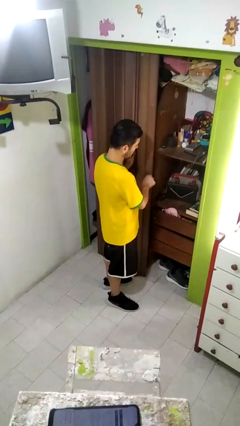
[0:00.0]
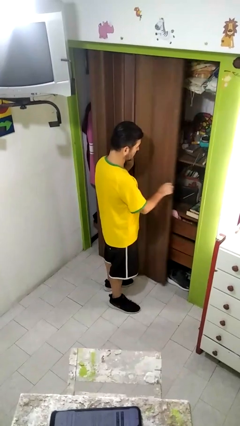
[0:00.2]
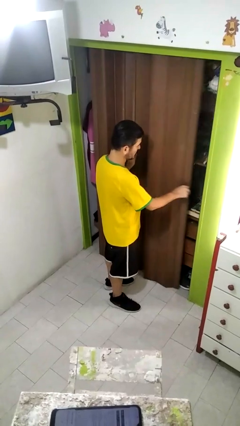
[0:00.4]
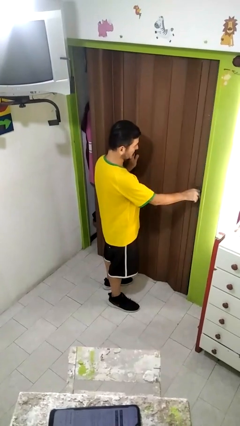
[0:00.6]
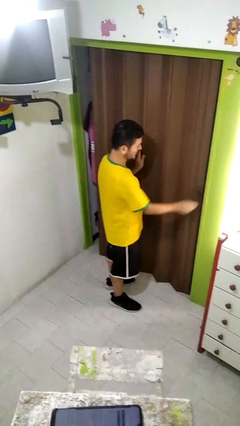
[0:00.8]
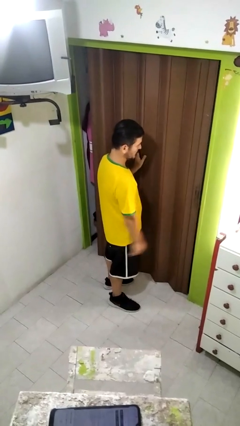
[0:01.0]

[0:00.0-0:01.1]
person closes closet door

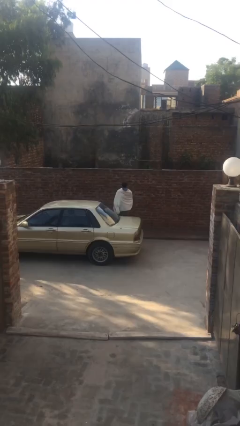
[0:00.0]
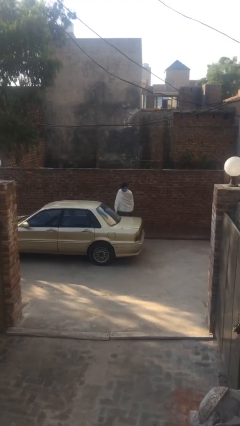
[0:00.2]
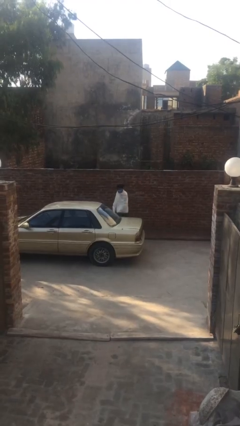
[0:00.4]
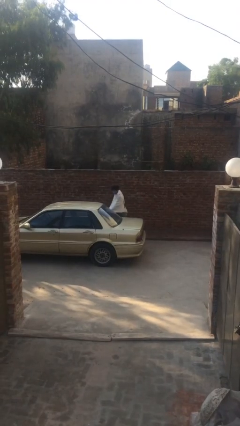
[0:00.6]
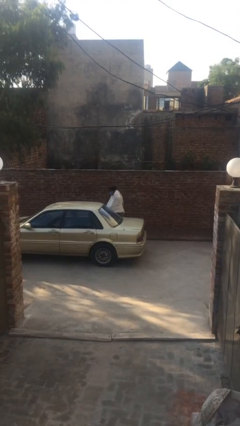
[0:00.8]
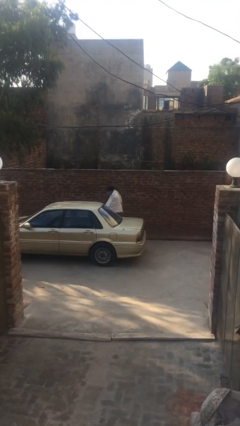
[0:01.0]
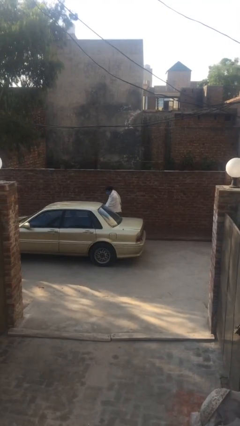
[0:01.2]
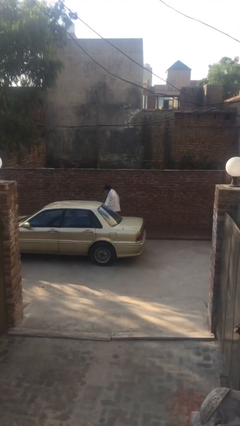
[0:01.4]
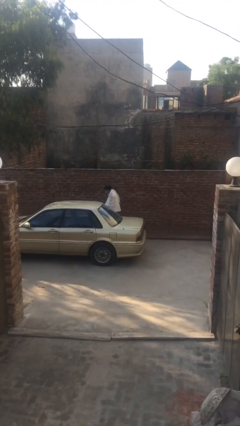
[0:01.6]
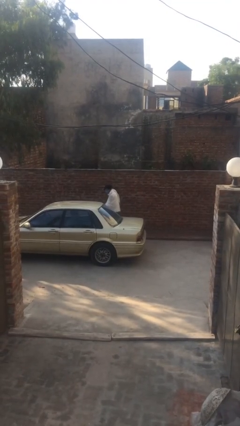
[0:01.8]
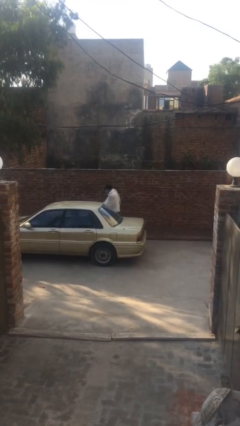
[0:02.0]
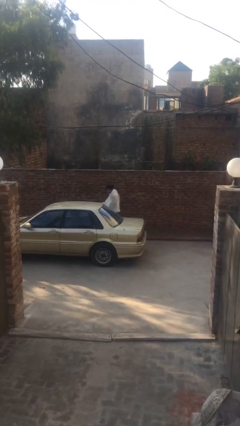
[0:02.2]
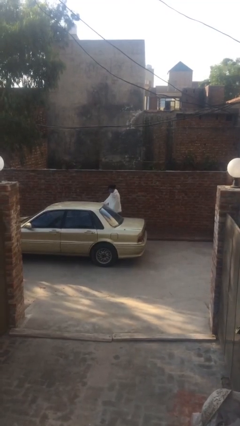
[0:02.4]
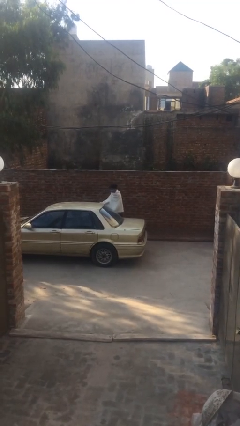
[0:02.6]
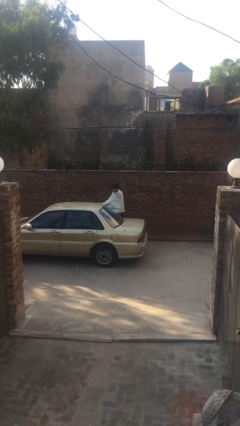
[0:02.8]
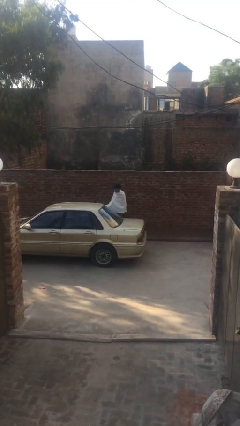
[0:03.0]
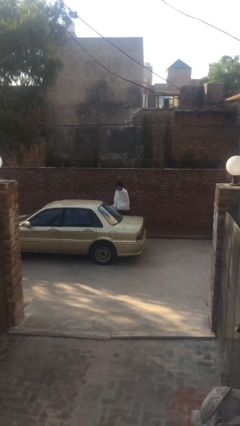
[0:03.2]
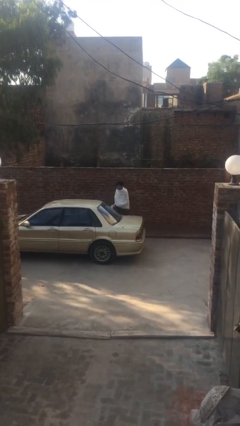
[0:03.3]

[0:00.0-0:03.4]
person opens car door

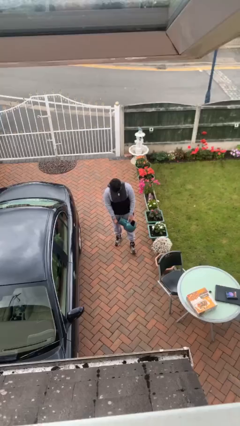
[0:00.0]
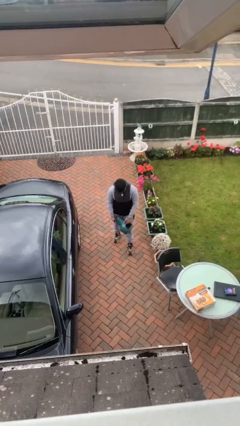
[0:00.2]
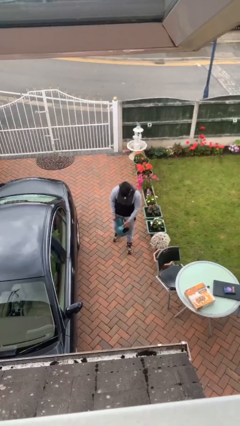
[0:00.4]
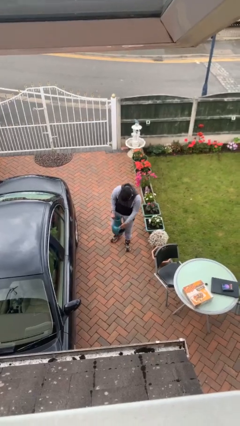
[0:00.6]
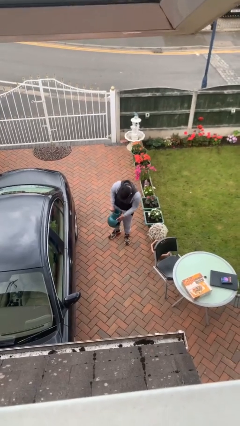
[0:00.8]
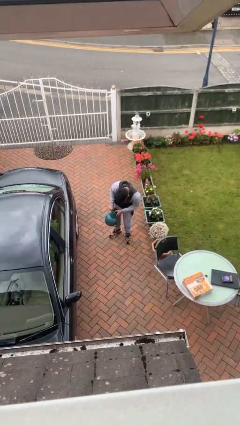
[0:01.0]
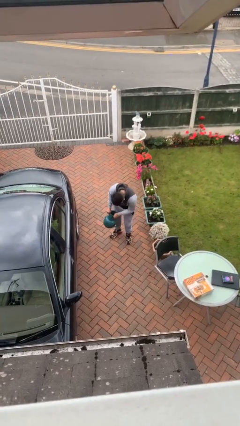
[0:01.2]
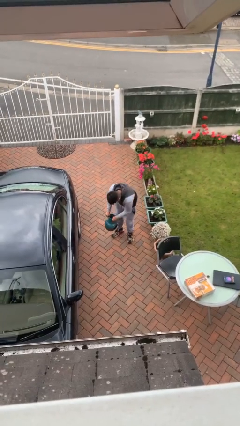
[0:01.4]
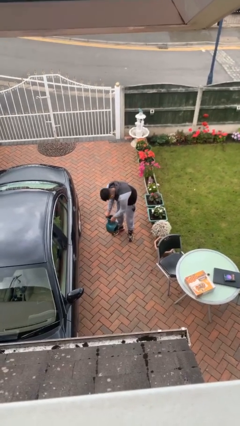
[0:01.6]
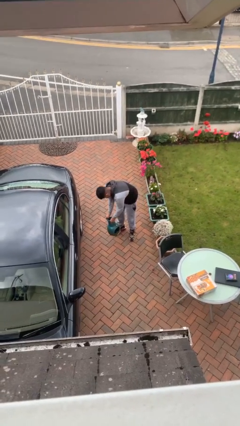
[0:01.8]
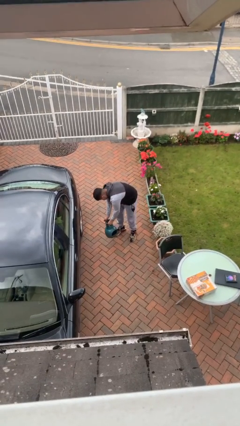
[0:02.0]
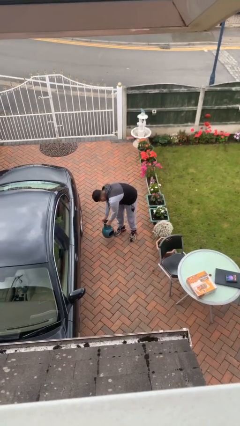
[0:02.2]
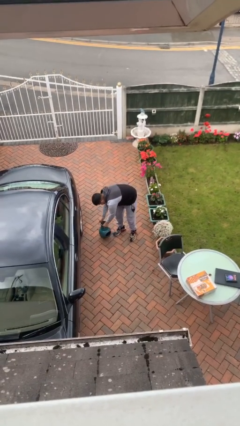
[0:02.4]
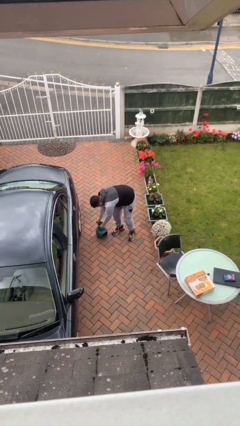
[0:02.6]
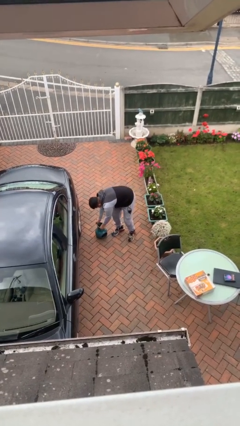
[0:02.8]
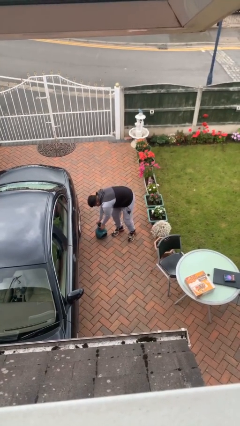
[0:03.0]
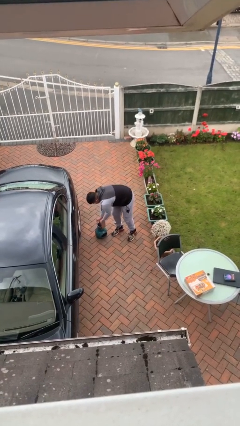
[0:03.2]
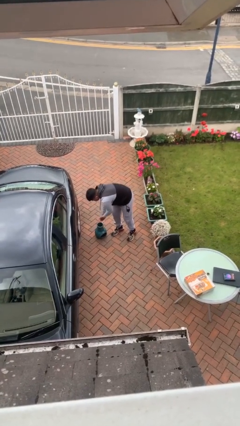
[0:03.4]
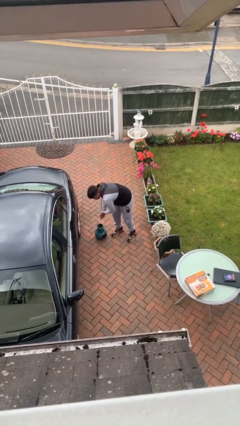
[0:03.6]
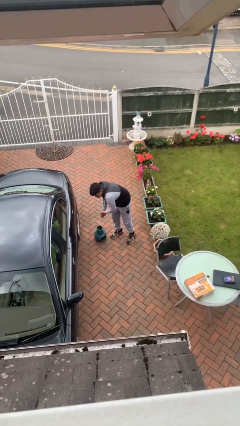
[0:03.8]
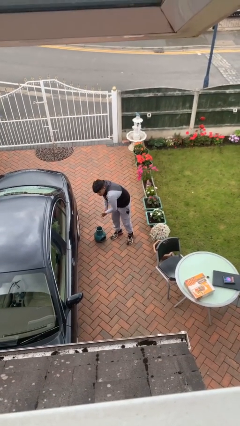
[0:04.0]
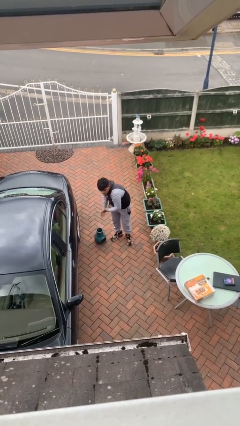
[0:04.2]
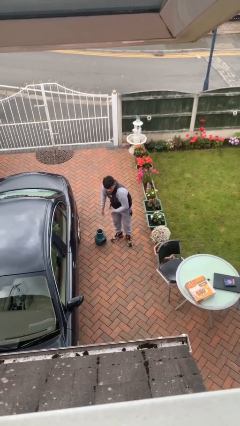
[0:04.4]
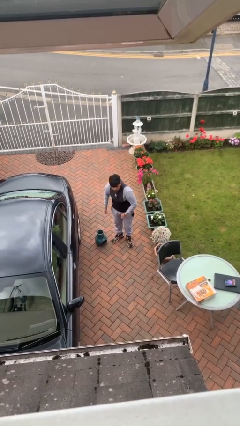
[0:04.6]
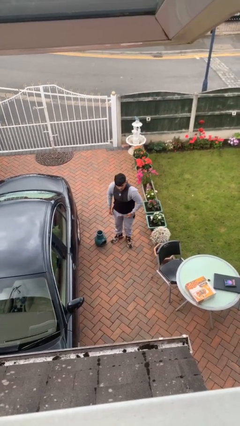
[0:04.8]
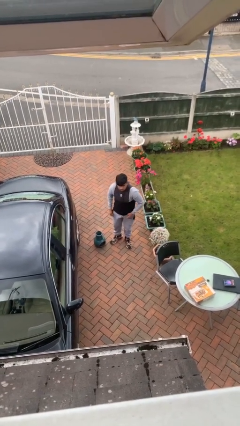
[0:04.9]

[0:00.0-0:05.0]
person puts down object on floor

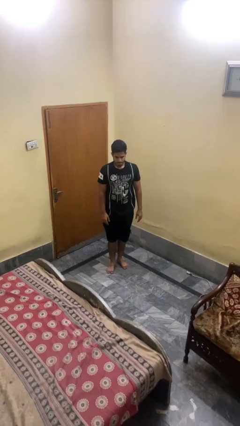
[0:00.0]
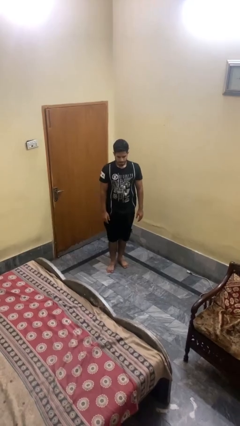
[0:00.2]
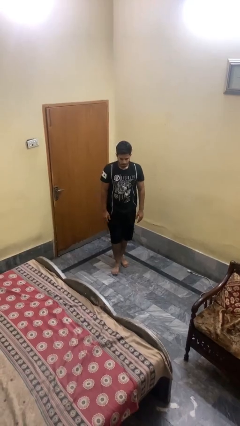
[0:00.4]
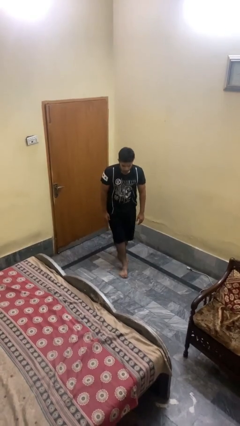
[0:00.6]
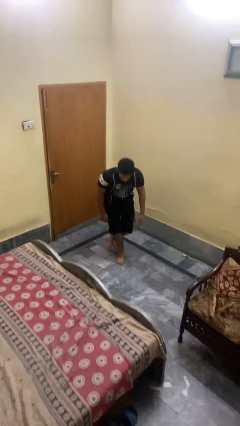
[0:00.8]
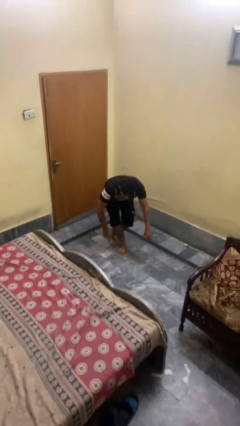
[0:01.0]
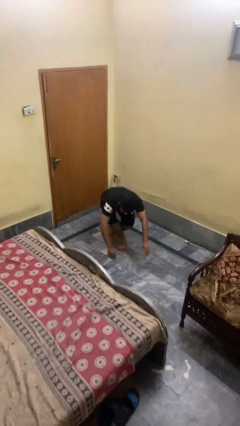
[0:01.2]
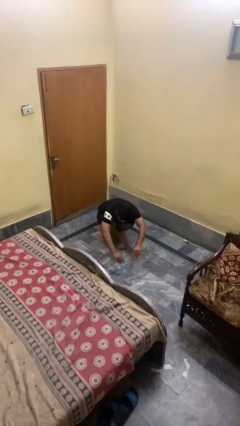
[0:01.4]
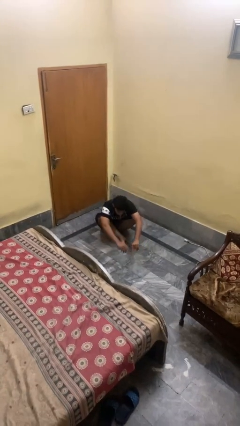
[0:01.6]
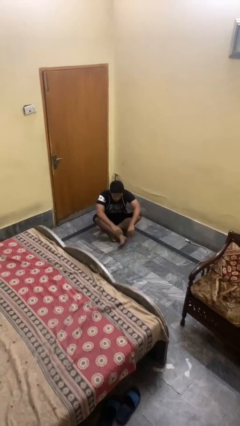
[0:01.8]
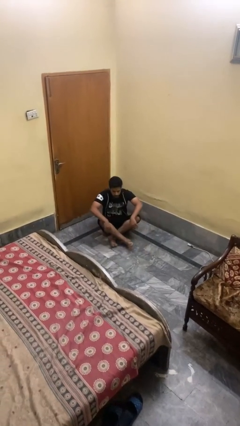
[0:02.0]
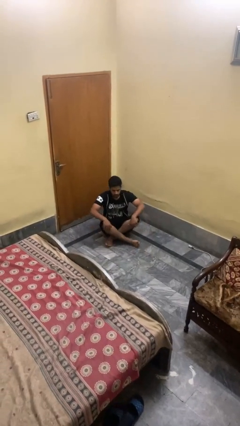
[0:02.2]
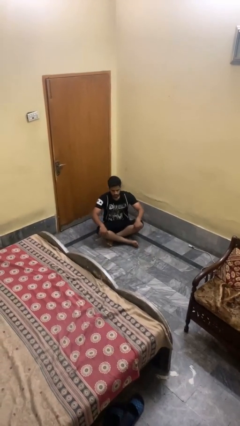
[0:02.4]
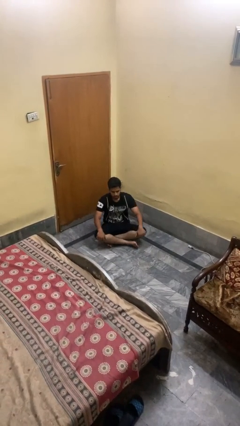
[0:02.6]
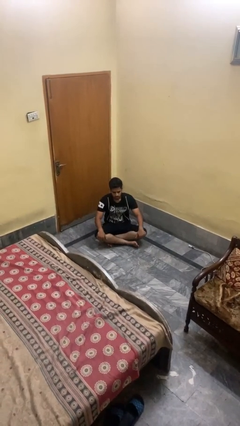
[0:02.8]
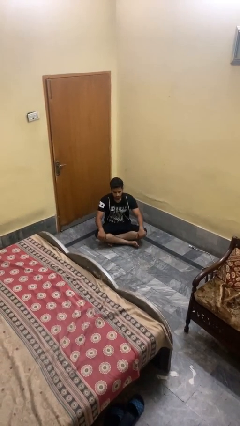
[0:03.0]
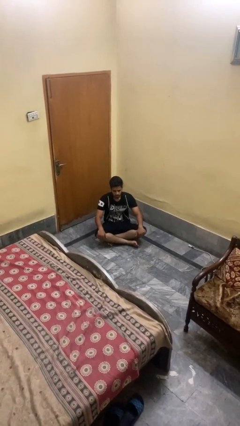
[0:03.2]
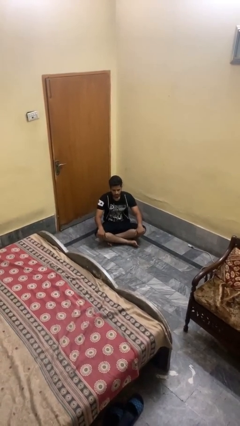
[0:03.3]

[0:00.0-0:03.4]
person sits crisscross

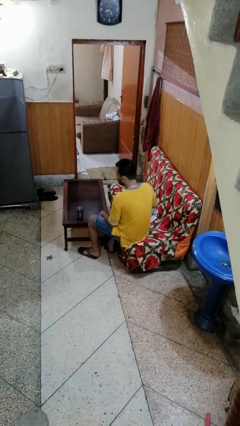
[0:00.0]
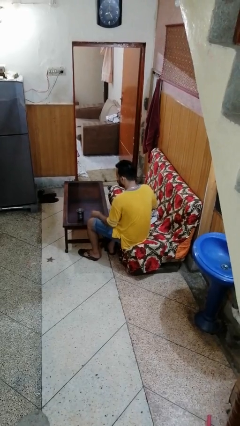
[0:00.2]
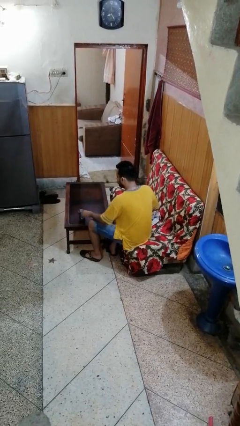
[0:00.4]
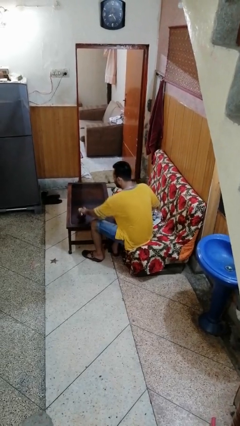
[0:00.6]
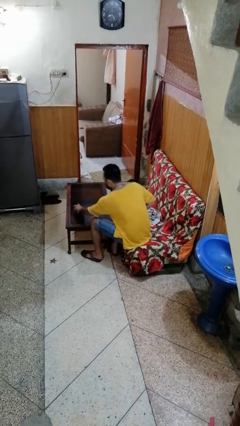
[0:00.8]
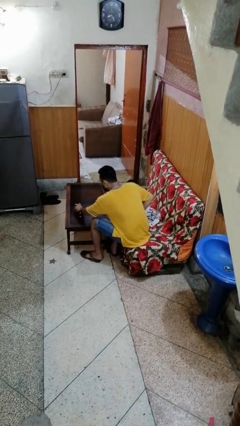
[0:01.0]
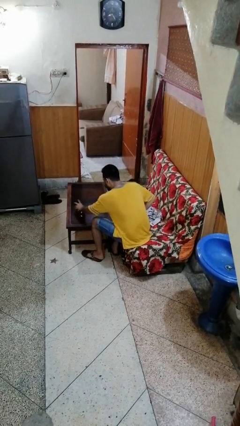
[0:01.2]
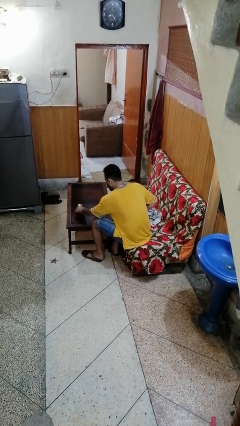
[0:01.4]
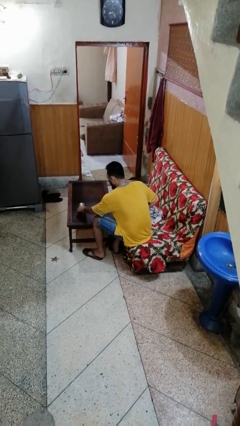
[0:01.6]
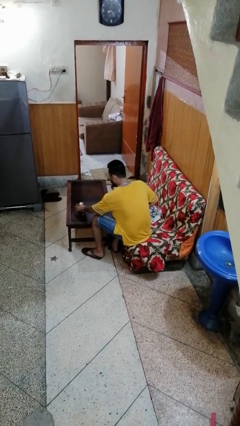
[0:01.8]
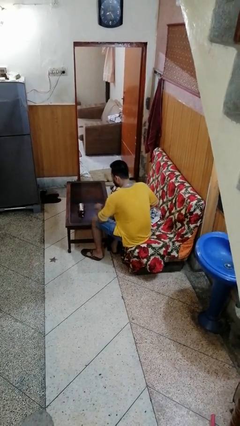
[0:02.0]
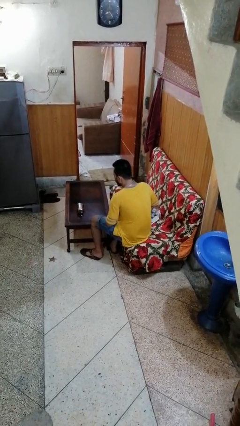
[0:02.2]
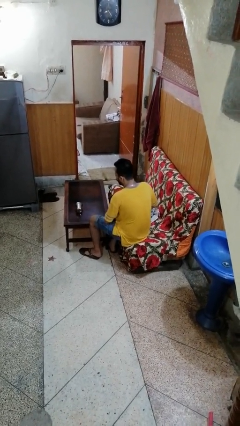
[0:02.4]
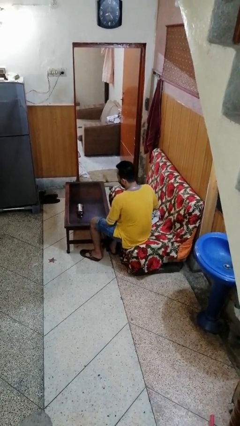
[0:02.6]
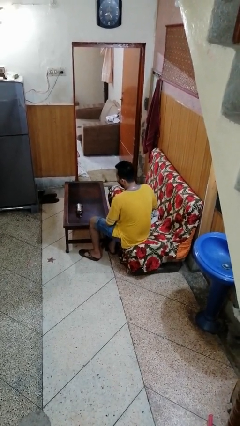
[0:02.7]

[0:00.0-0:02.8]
person knocks over glass

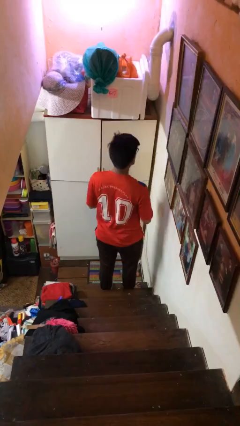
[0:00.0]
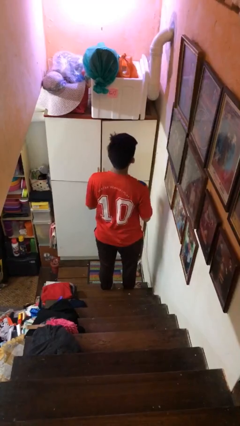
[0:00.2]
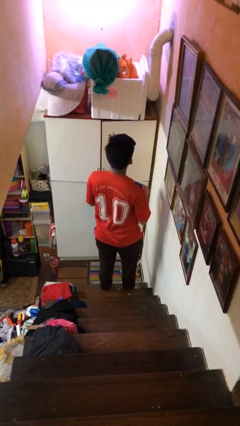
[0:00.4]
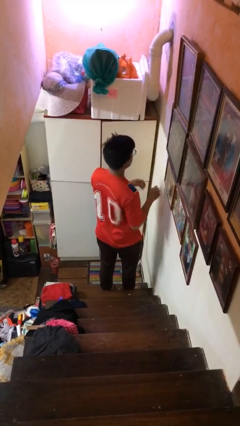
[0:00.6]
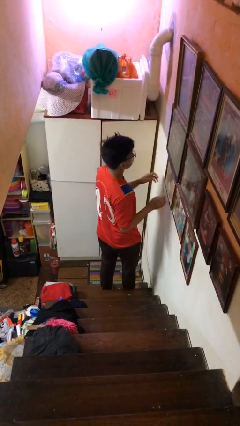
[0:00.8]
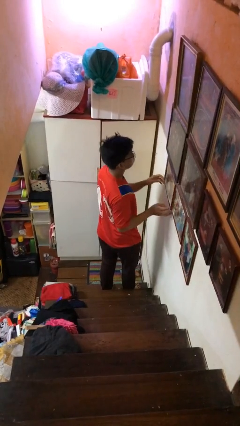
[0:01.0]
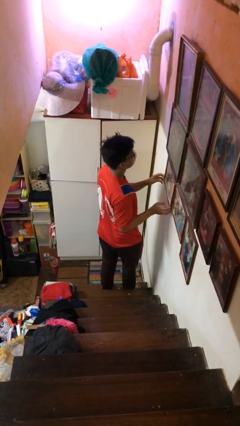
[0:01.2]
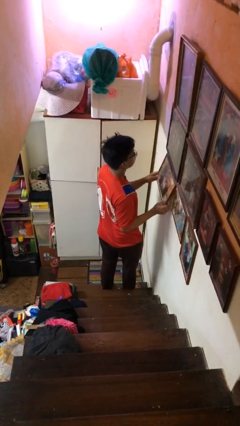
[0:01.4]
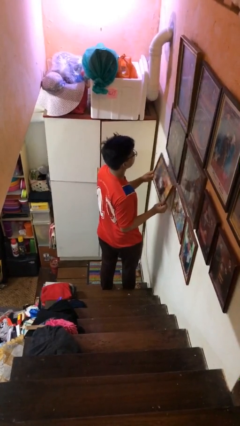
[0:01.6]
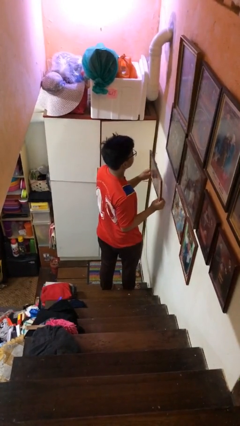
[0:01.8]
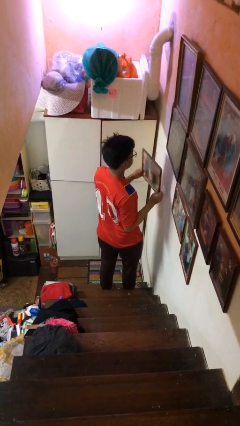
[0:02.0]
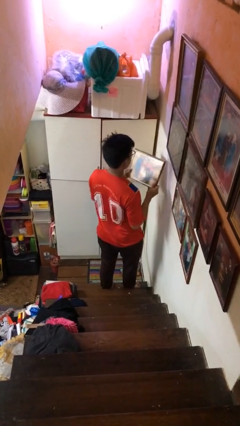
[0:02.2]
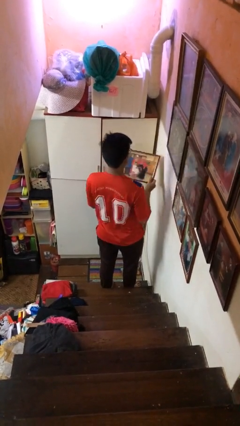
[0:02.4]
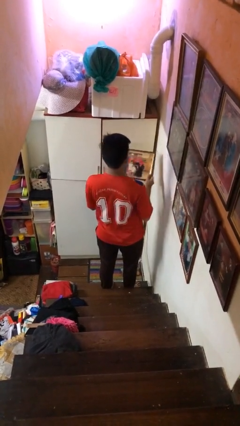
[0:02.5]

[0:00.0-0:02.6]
person takes down picture frame
